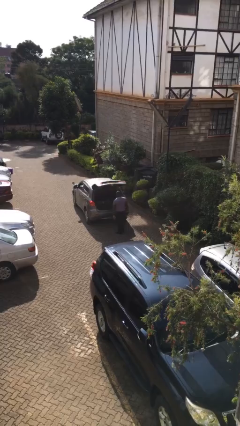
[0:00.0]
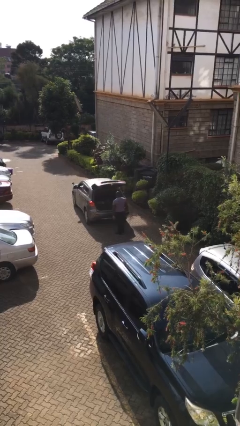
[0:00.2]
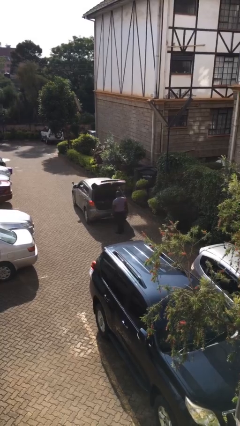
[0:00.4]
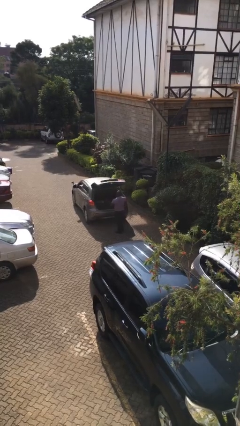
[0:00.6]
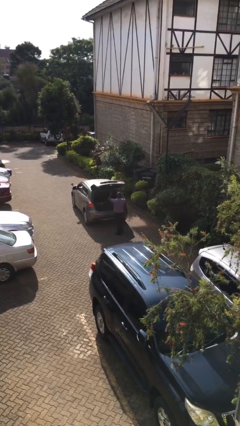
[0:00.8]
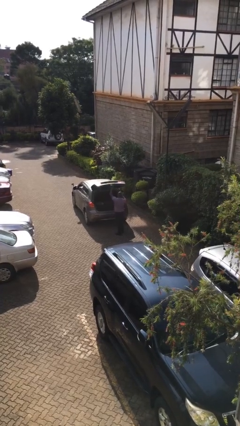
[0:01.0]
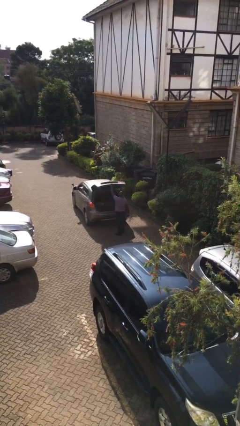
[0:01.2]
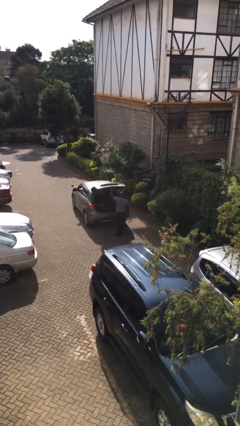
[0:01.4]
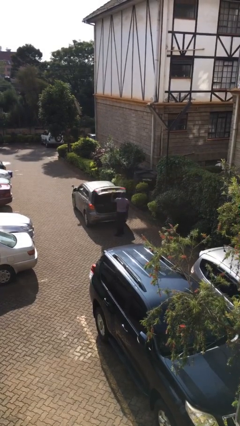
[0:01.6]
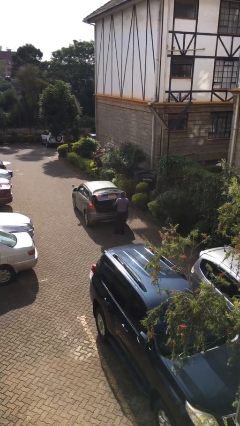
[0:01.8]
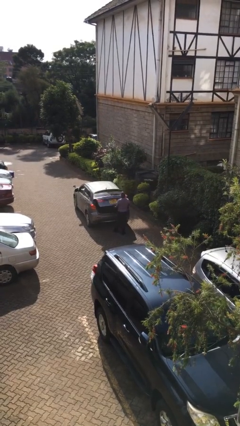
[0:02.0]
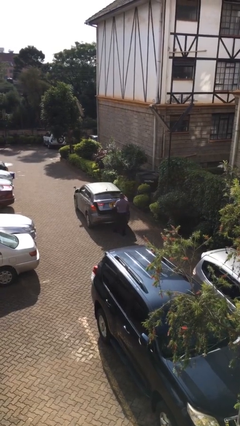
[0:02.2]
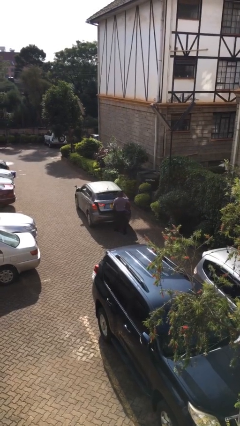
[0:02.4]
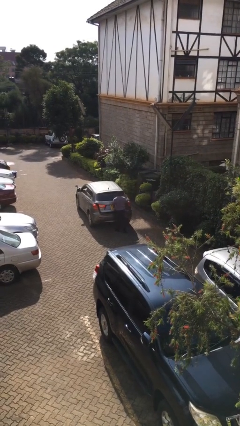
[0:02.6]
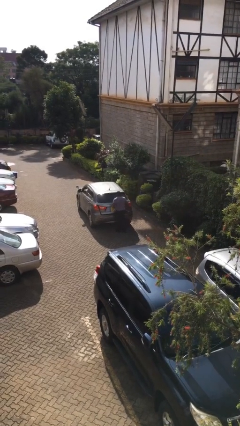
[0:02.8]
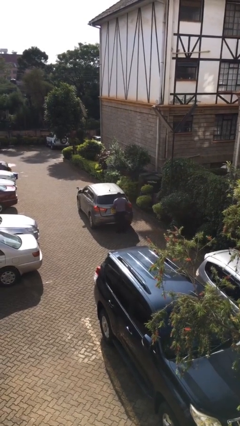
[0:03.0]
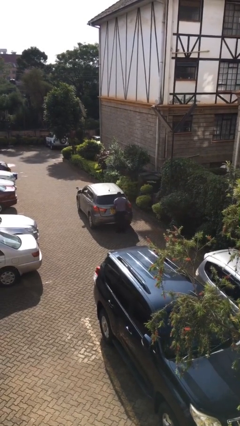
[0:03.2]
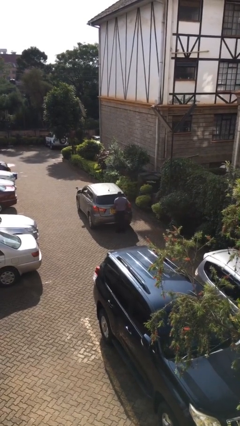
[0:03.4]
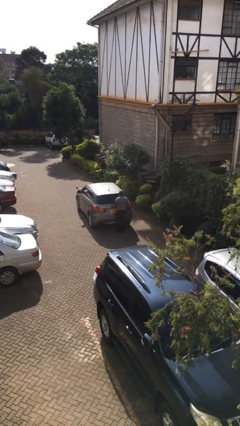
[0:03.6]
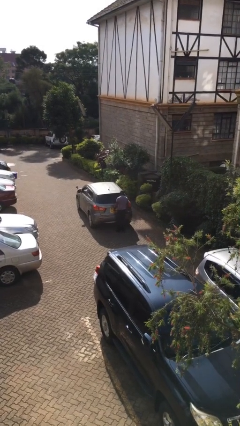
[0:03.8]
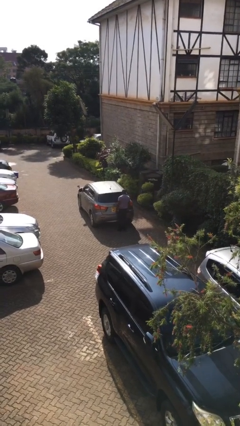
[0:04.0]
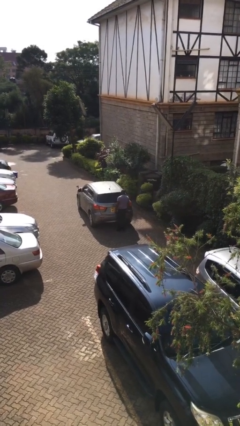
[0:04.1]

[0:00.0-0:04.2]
person closes car trunk

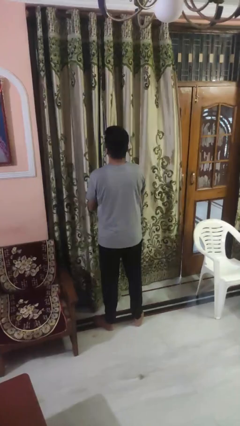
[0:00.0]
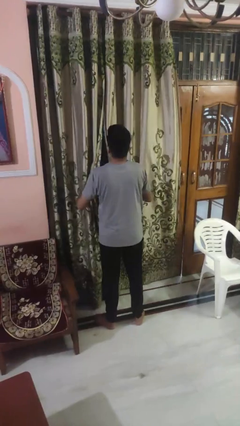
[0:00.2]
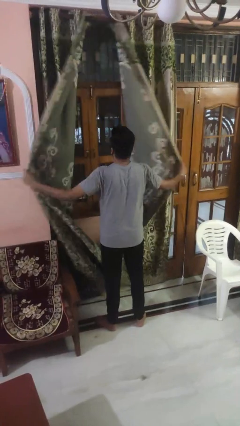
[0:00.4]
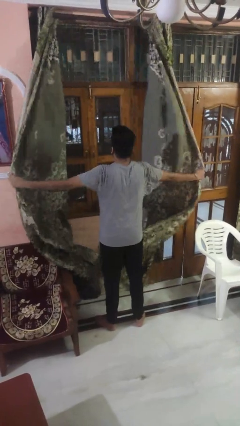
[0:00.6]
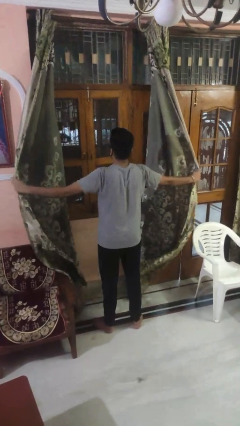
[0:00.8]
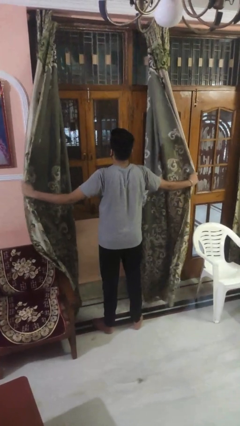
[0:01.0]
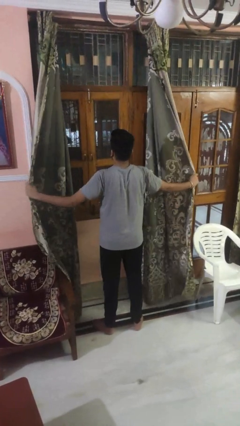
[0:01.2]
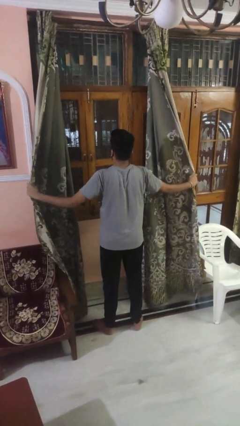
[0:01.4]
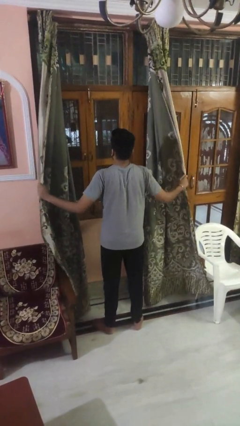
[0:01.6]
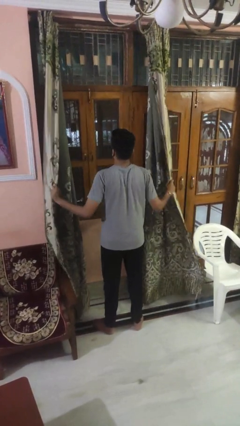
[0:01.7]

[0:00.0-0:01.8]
person opens curtains

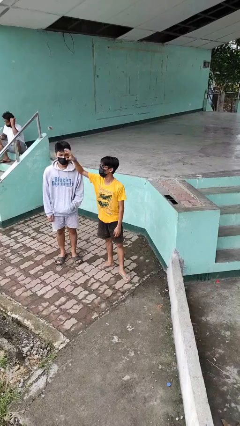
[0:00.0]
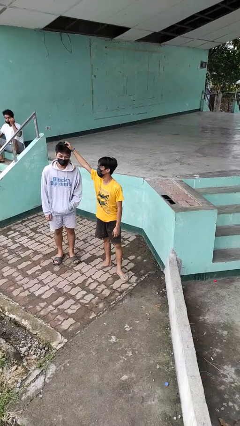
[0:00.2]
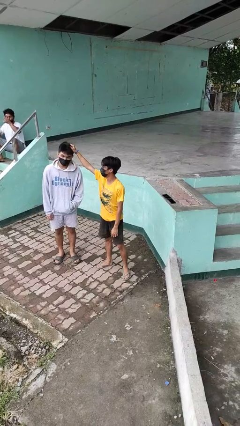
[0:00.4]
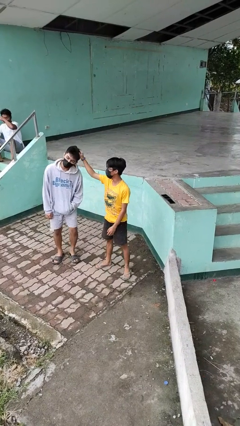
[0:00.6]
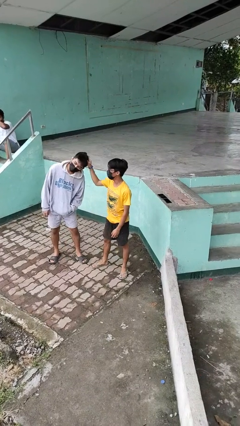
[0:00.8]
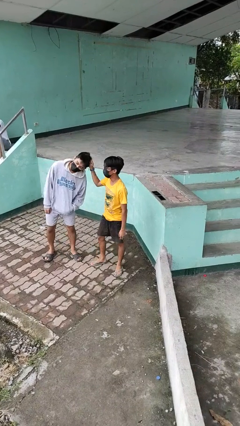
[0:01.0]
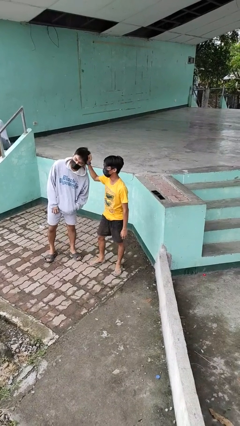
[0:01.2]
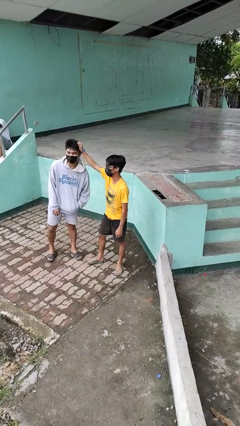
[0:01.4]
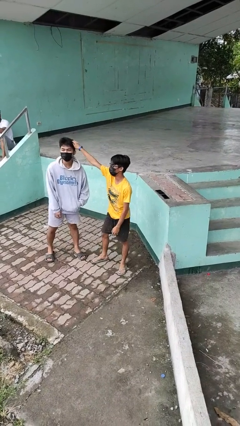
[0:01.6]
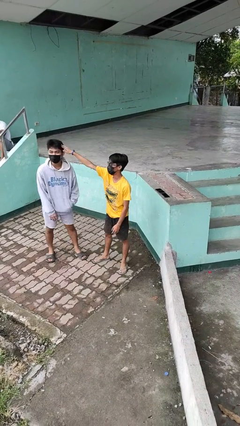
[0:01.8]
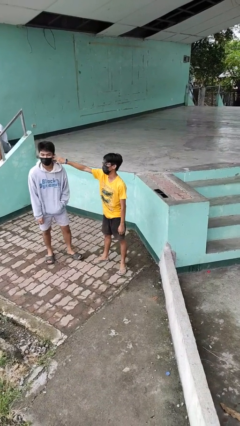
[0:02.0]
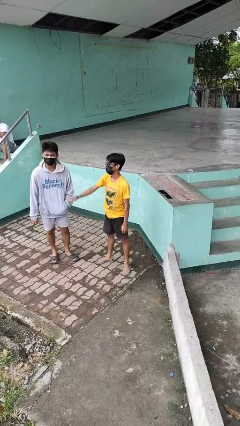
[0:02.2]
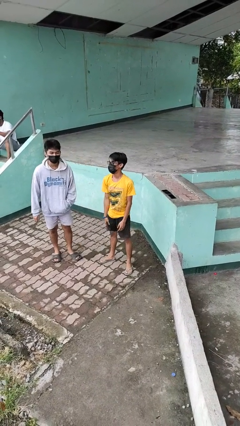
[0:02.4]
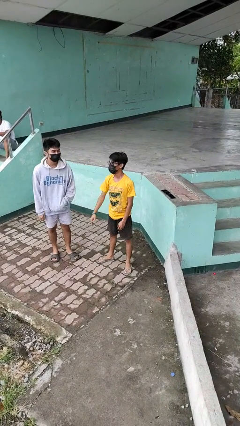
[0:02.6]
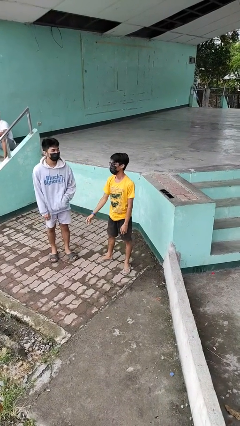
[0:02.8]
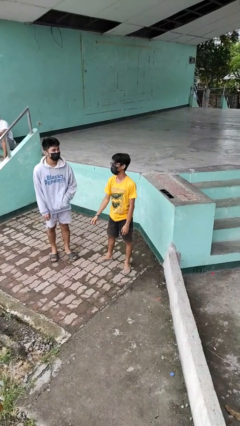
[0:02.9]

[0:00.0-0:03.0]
person grabs person by hair

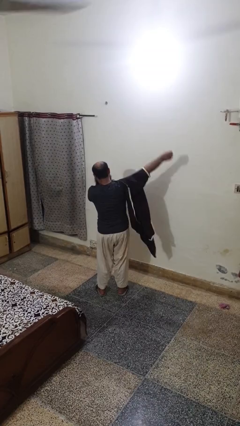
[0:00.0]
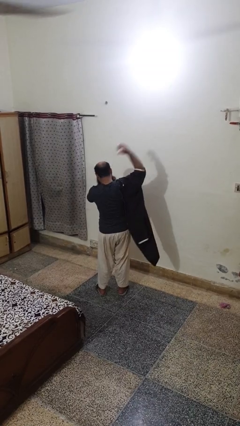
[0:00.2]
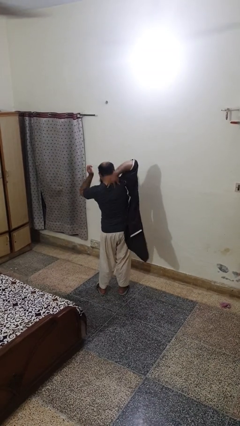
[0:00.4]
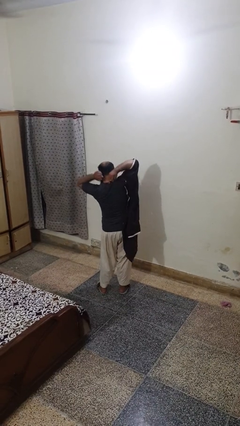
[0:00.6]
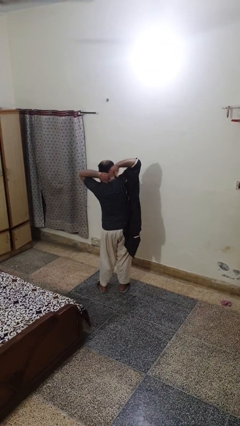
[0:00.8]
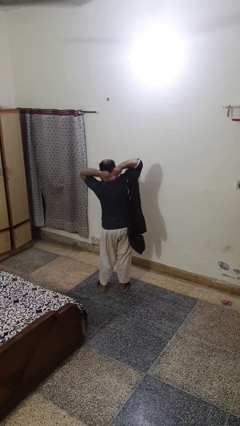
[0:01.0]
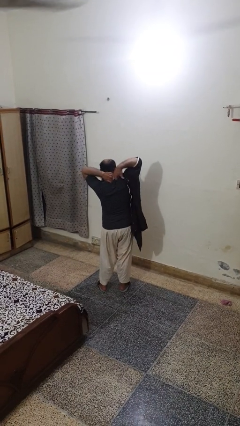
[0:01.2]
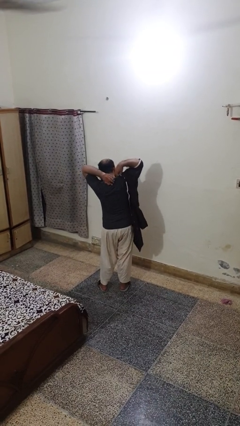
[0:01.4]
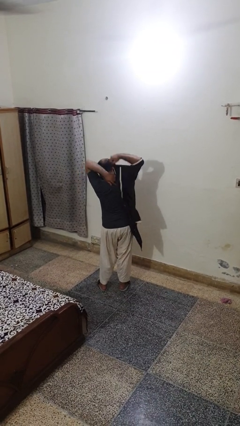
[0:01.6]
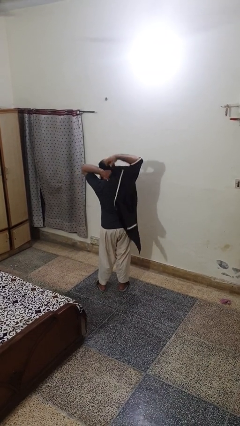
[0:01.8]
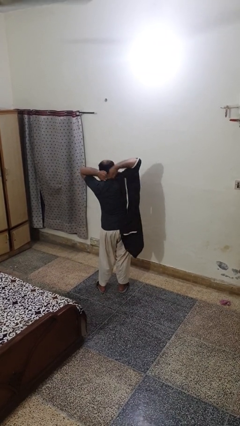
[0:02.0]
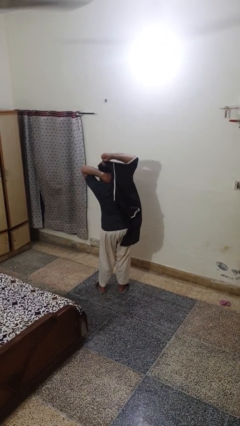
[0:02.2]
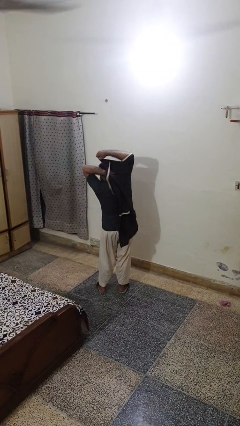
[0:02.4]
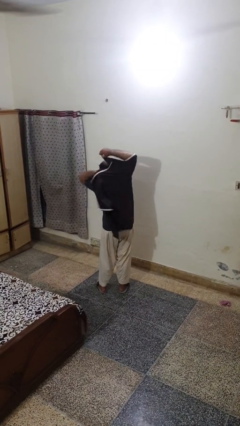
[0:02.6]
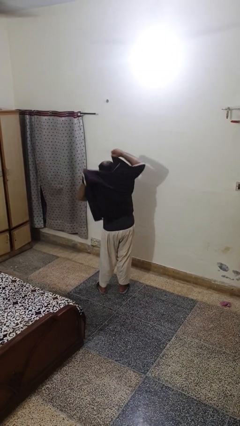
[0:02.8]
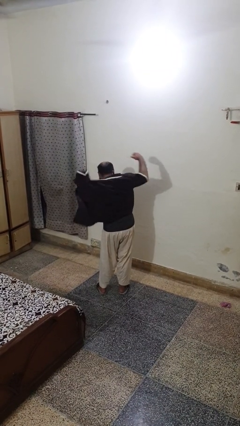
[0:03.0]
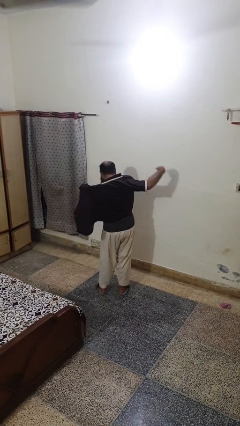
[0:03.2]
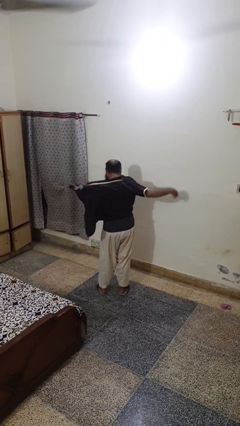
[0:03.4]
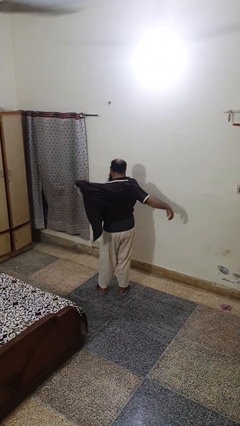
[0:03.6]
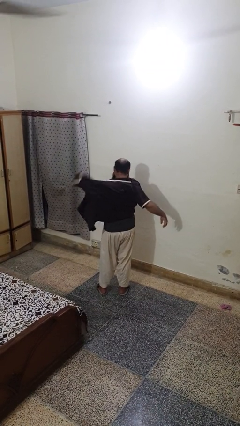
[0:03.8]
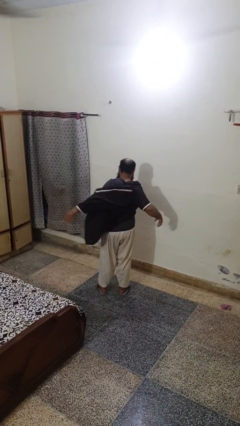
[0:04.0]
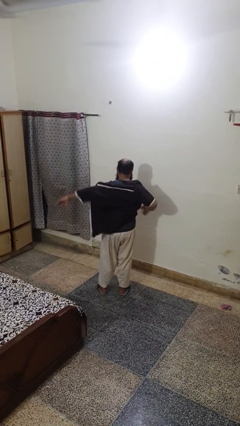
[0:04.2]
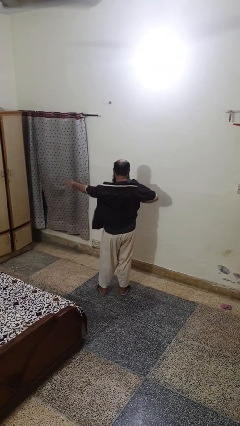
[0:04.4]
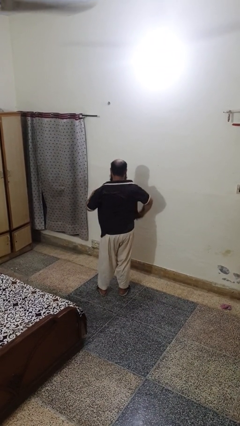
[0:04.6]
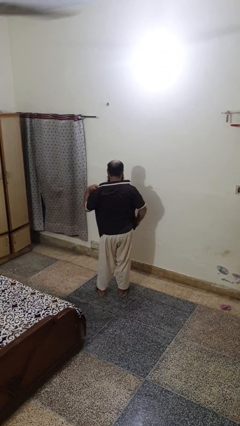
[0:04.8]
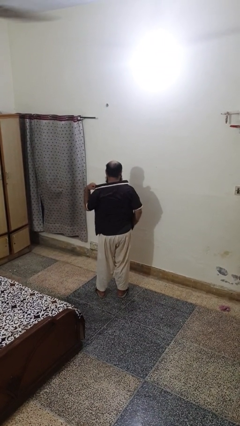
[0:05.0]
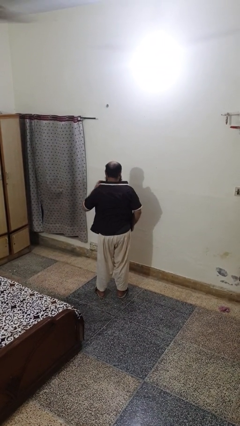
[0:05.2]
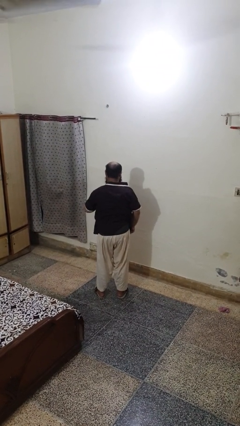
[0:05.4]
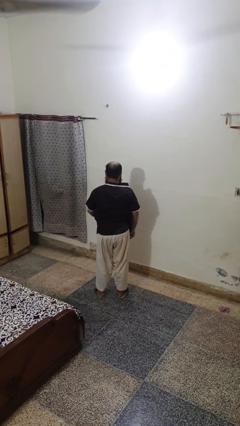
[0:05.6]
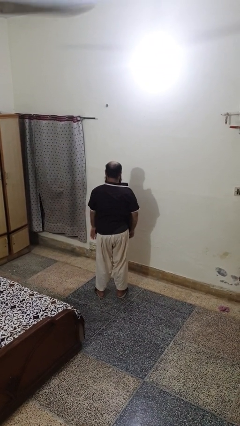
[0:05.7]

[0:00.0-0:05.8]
person puts on shirt

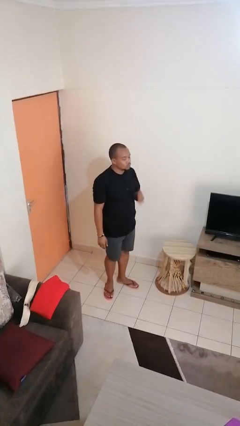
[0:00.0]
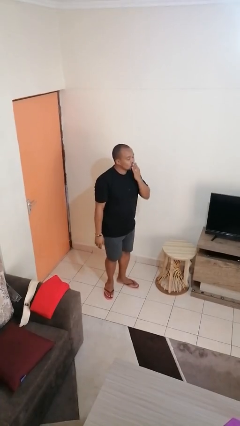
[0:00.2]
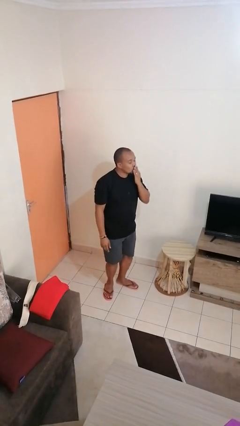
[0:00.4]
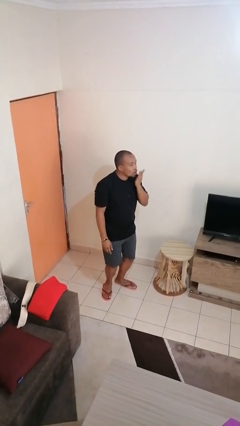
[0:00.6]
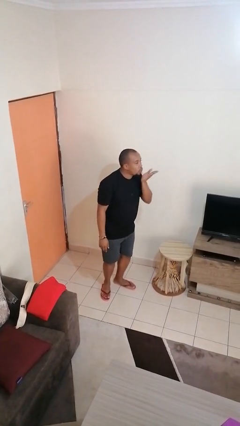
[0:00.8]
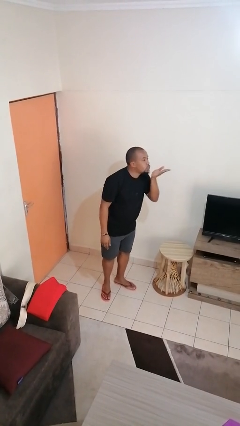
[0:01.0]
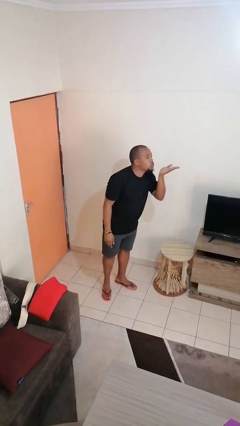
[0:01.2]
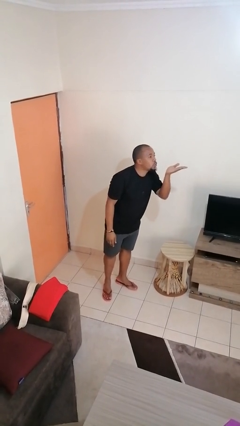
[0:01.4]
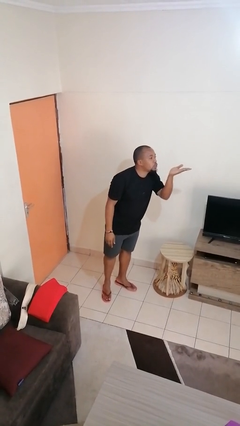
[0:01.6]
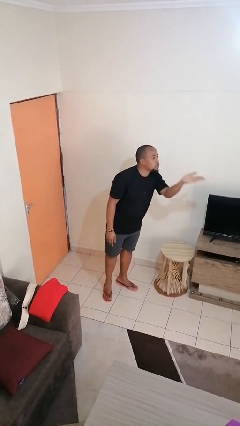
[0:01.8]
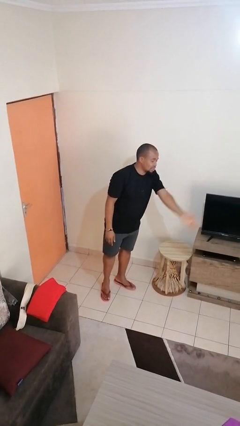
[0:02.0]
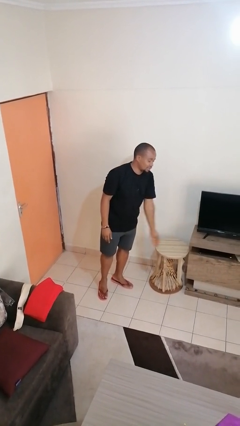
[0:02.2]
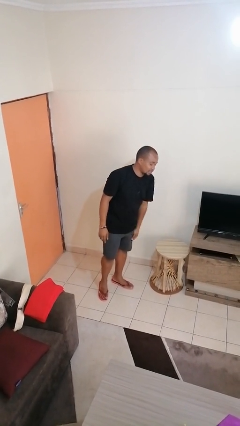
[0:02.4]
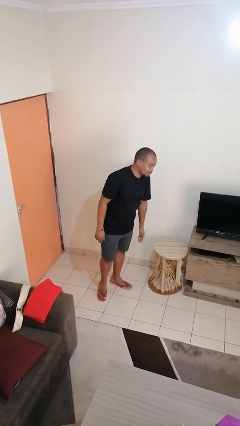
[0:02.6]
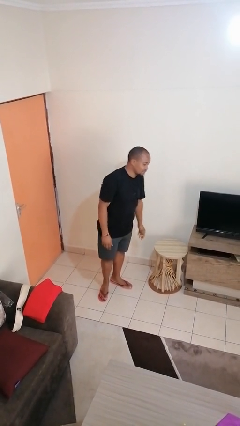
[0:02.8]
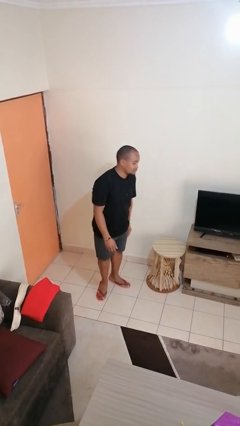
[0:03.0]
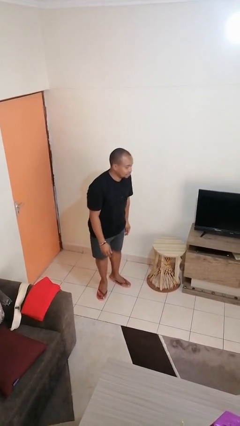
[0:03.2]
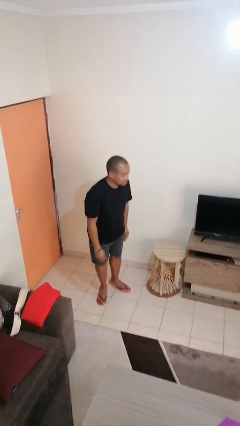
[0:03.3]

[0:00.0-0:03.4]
person gestures blow kiss
